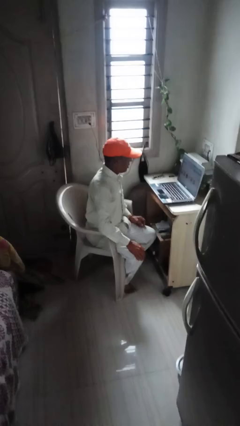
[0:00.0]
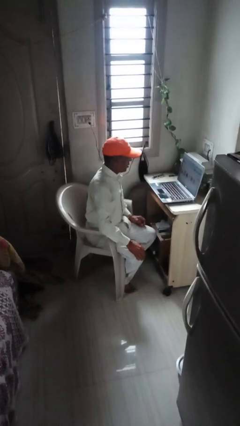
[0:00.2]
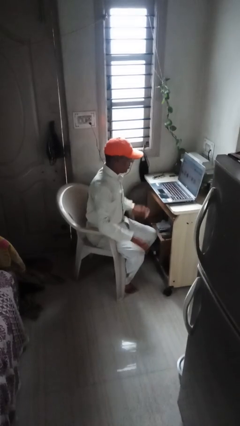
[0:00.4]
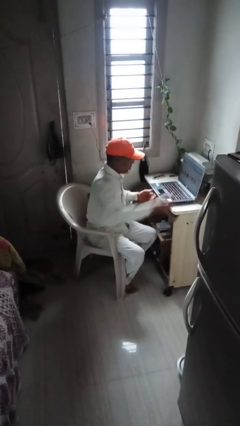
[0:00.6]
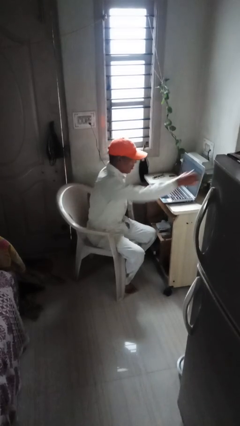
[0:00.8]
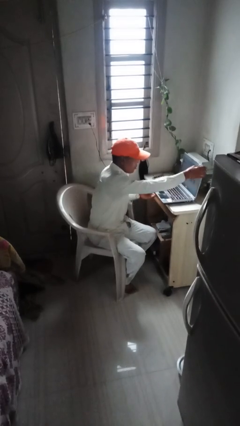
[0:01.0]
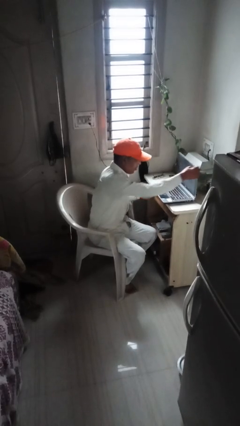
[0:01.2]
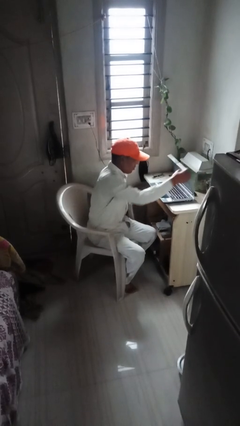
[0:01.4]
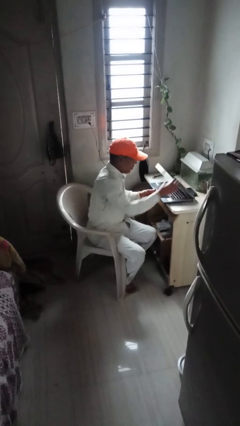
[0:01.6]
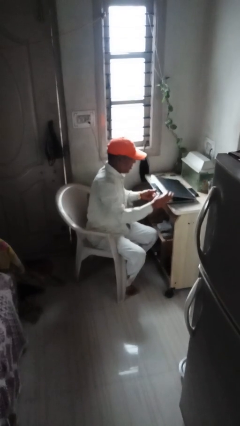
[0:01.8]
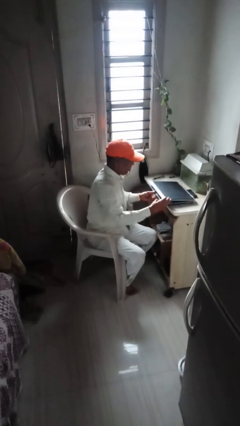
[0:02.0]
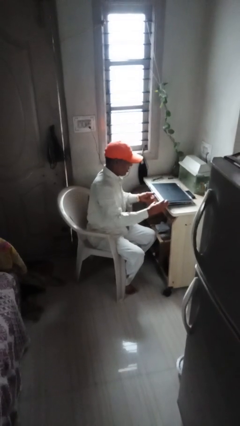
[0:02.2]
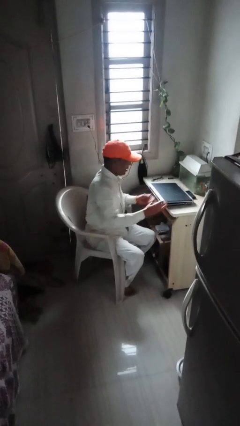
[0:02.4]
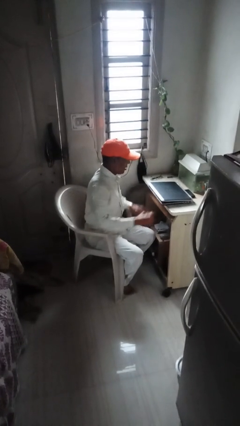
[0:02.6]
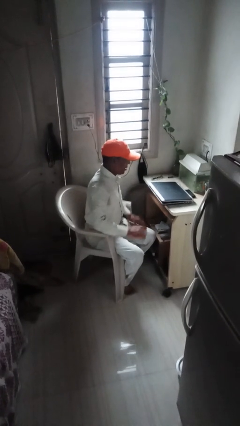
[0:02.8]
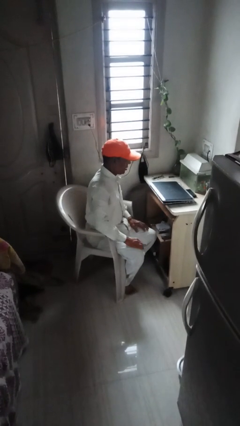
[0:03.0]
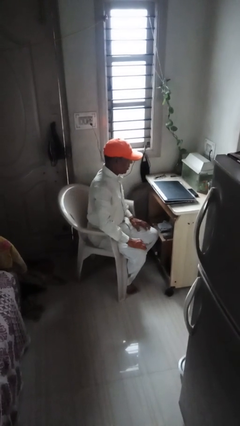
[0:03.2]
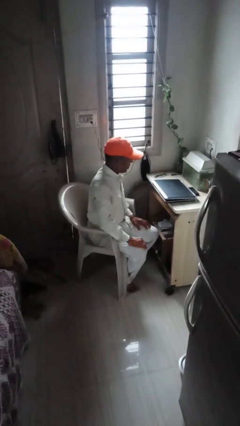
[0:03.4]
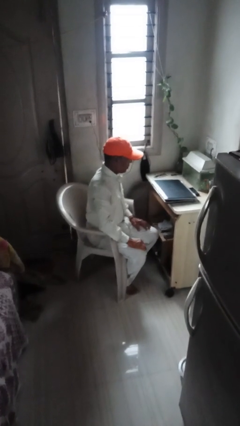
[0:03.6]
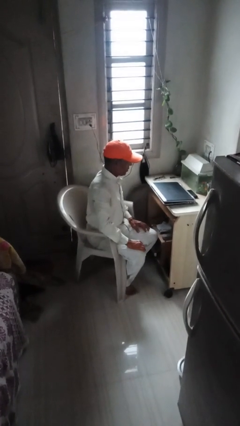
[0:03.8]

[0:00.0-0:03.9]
person closes laptop

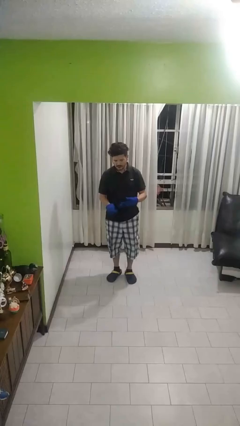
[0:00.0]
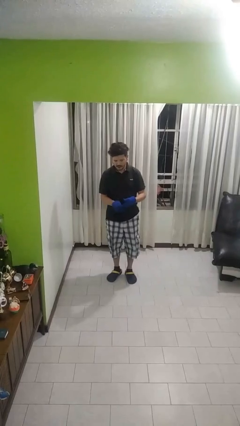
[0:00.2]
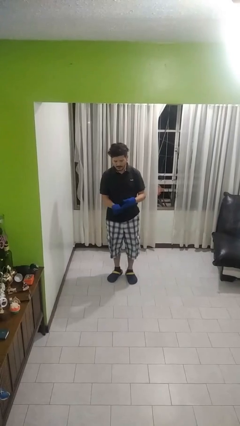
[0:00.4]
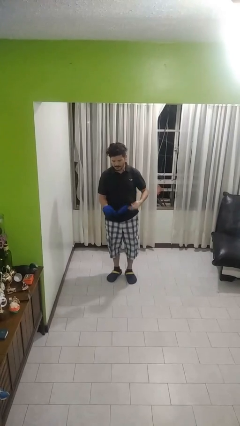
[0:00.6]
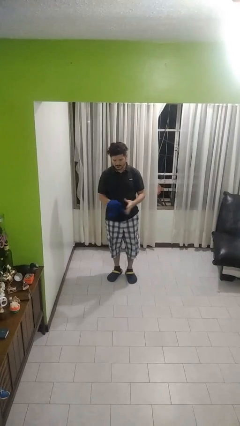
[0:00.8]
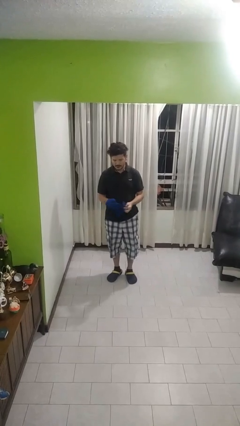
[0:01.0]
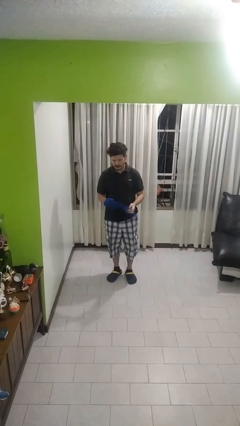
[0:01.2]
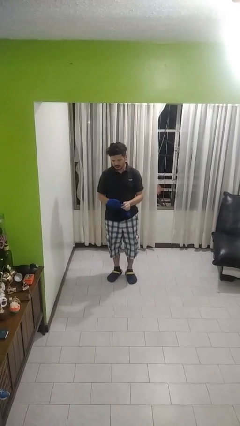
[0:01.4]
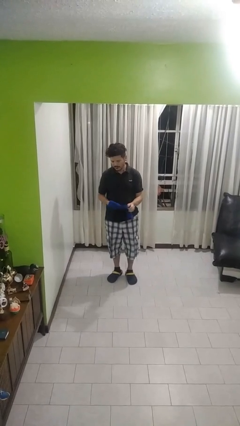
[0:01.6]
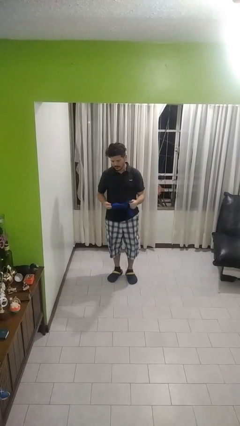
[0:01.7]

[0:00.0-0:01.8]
person takes off gloves

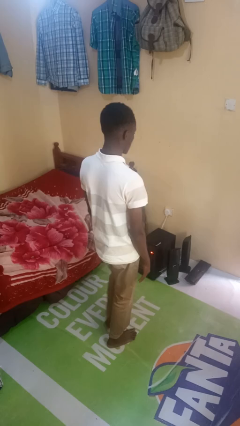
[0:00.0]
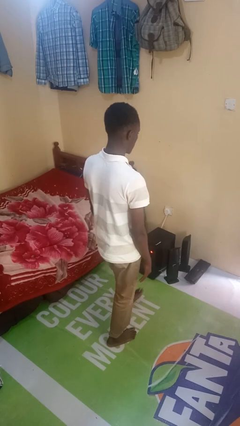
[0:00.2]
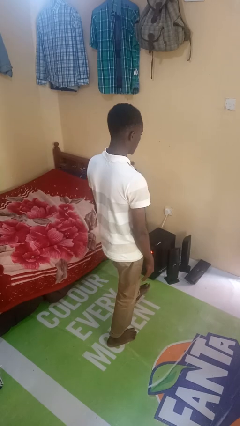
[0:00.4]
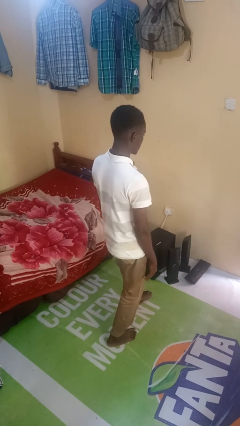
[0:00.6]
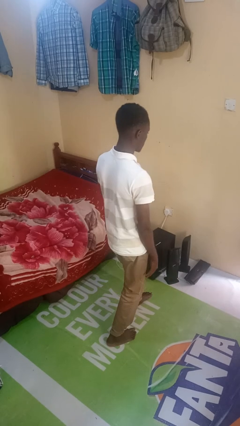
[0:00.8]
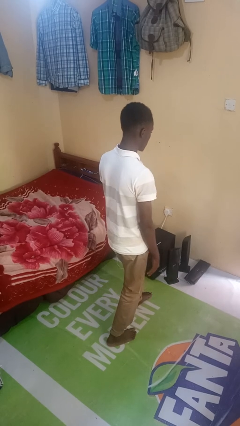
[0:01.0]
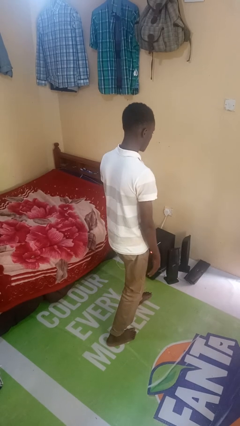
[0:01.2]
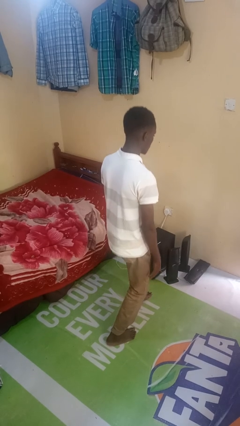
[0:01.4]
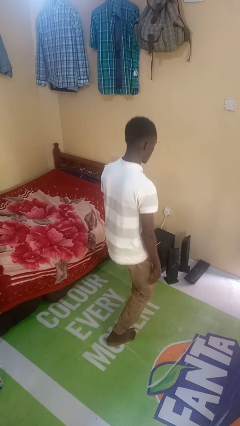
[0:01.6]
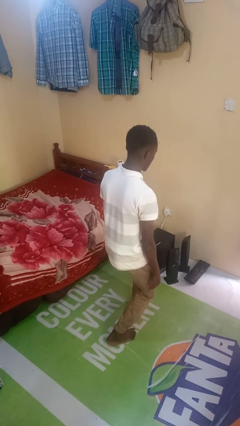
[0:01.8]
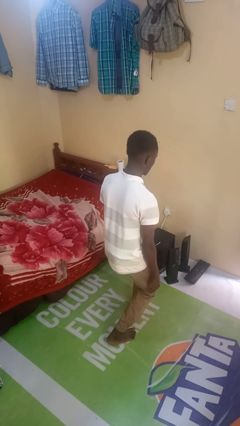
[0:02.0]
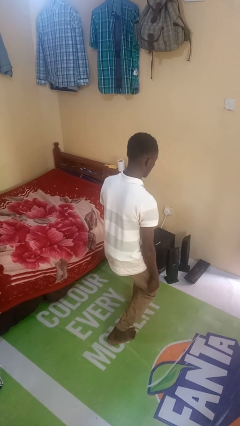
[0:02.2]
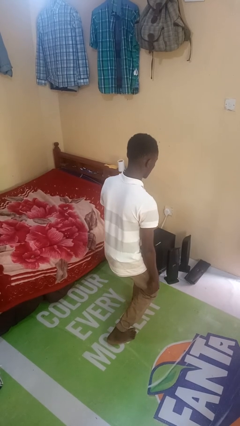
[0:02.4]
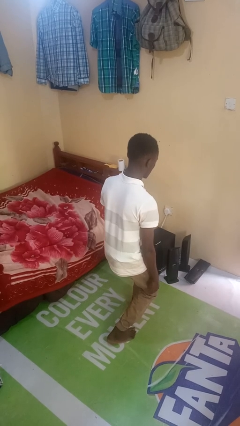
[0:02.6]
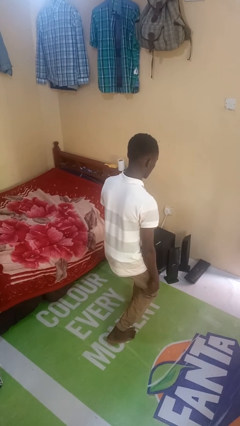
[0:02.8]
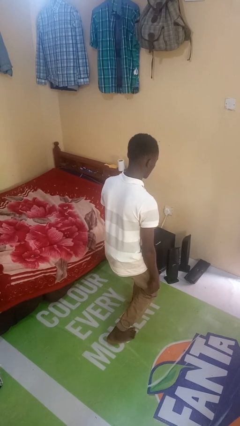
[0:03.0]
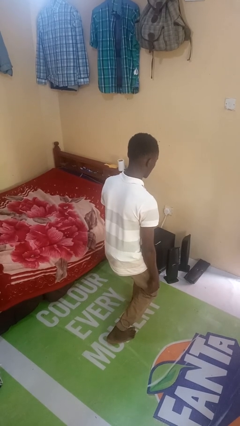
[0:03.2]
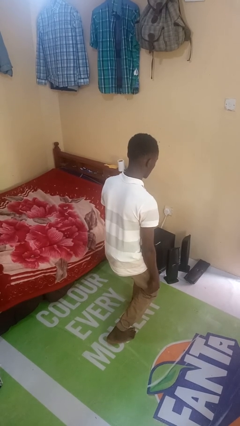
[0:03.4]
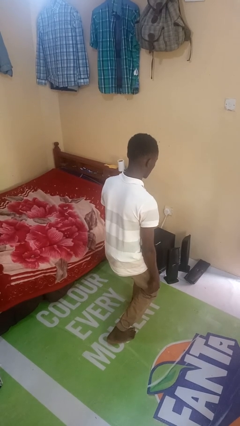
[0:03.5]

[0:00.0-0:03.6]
person exercises with lunges

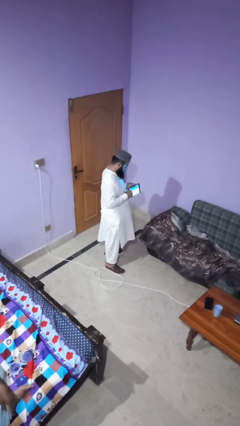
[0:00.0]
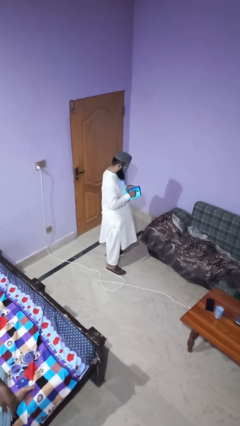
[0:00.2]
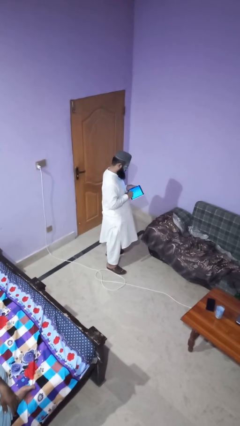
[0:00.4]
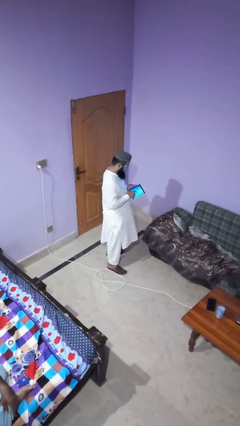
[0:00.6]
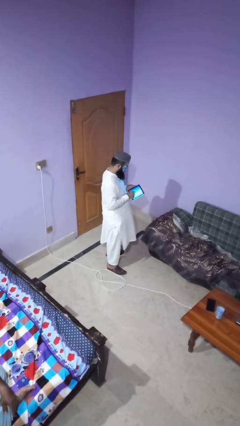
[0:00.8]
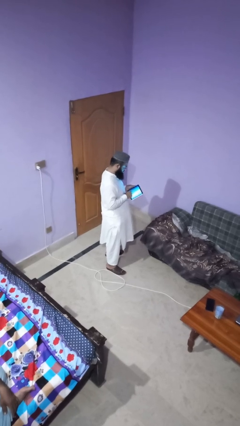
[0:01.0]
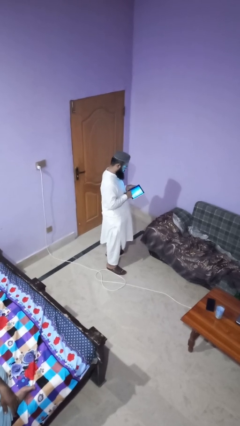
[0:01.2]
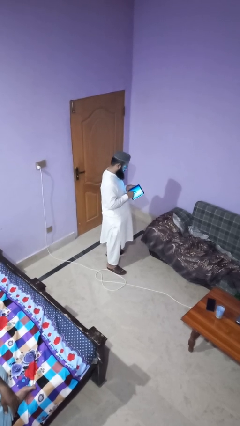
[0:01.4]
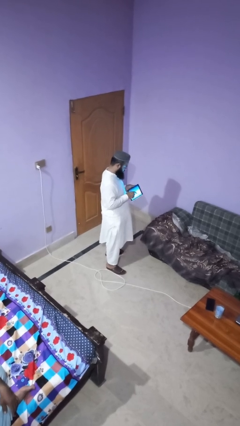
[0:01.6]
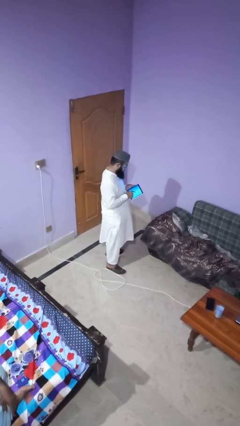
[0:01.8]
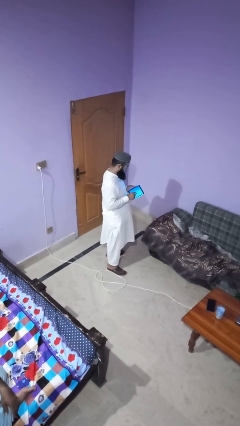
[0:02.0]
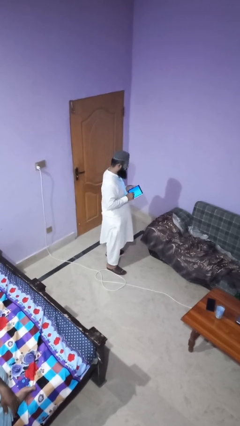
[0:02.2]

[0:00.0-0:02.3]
person interacts with tablet

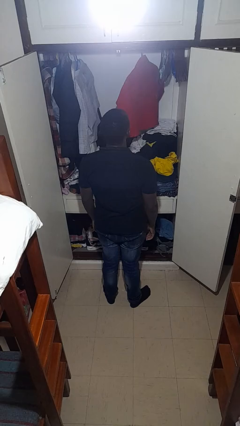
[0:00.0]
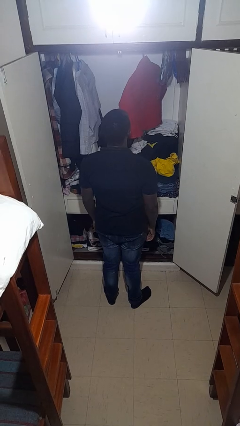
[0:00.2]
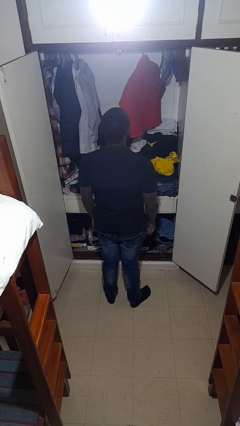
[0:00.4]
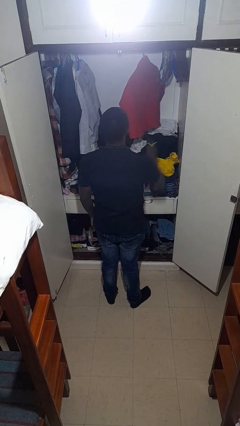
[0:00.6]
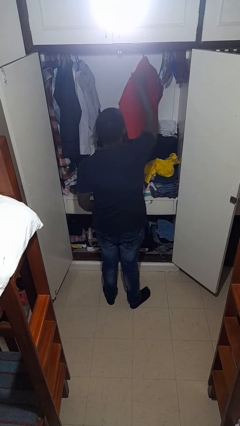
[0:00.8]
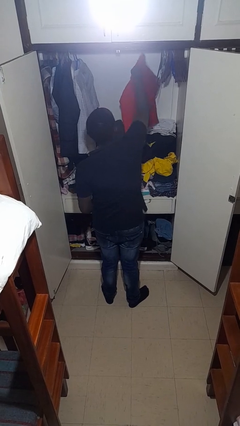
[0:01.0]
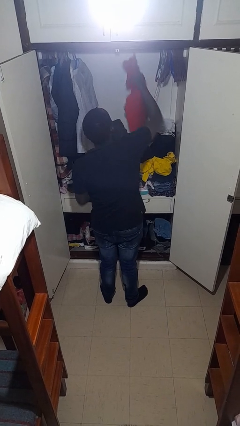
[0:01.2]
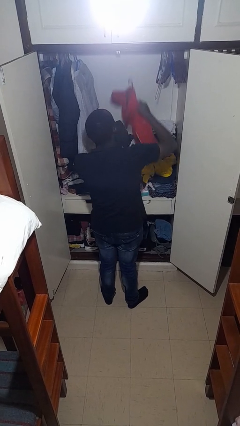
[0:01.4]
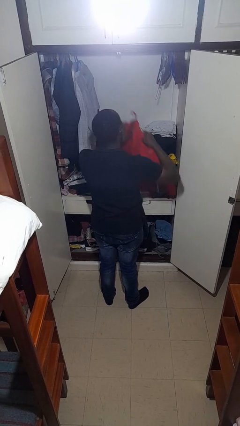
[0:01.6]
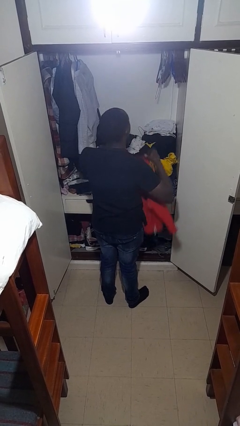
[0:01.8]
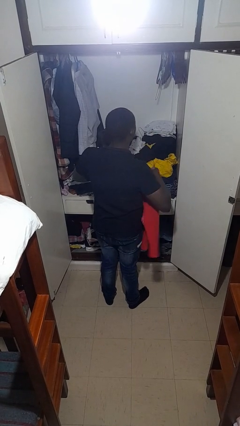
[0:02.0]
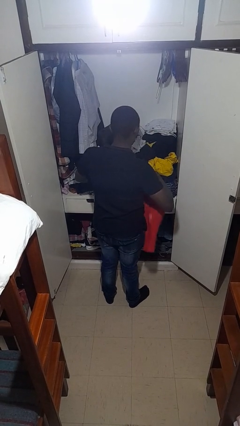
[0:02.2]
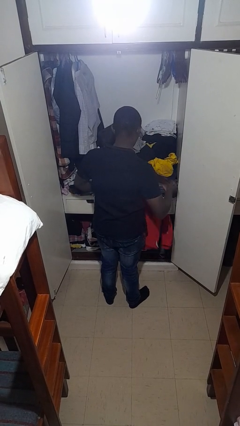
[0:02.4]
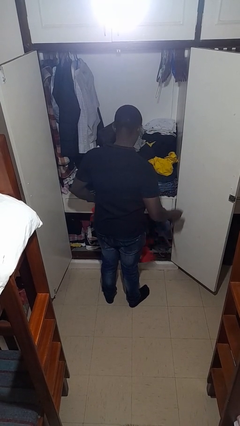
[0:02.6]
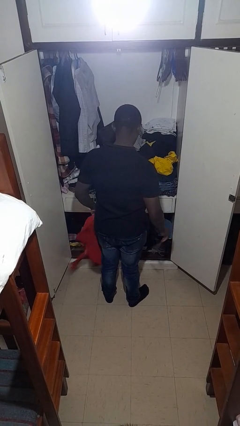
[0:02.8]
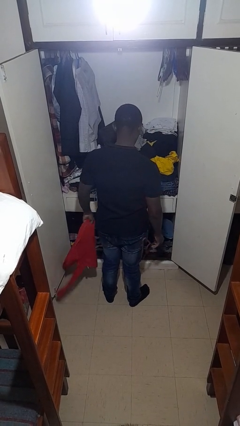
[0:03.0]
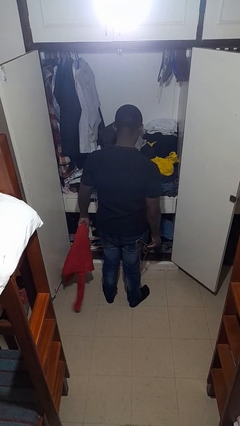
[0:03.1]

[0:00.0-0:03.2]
person takes clothes from closet

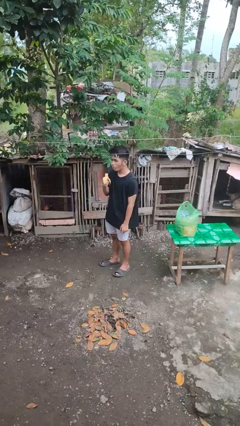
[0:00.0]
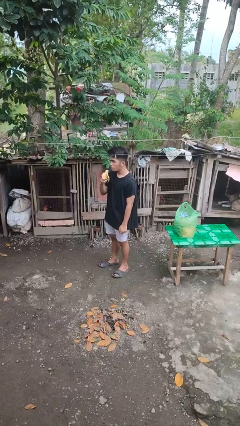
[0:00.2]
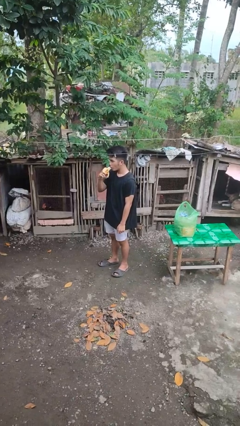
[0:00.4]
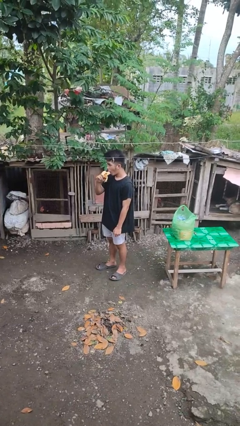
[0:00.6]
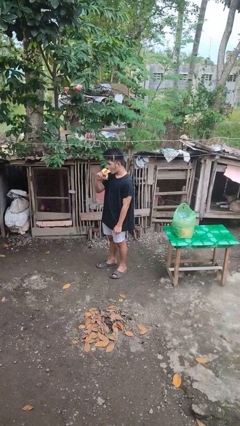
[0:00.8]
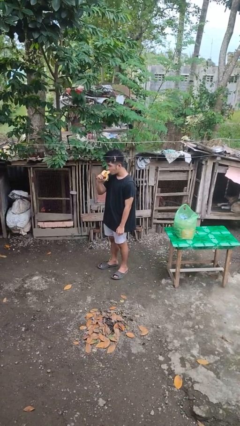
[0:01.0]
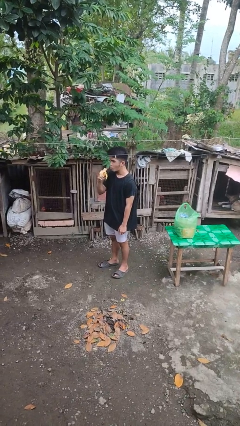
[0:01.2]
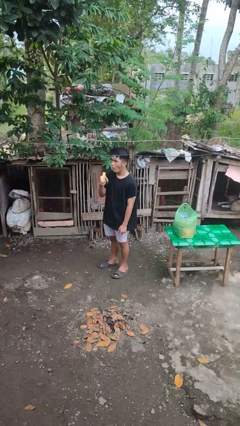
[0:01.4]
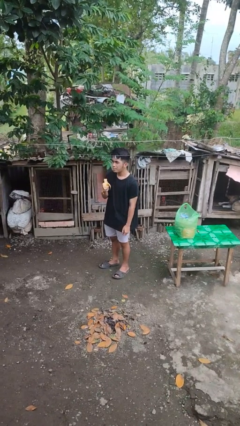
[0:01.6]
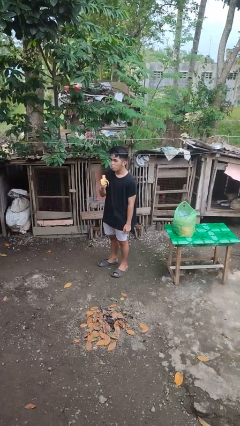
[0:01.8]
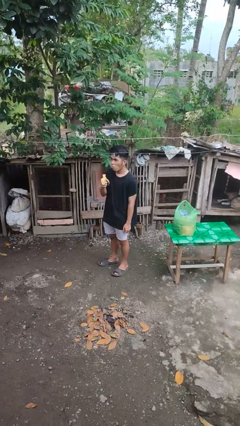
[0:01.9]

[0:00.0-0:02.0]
person eats banana

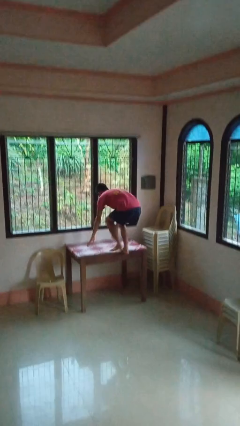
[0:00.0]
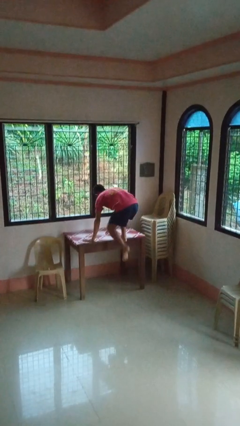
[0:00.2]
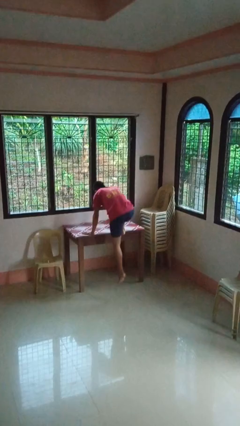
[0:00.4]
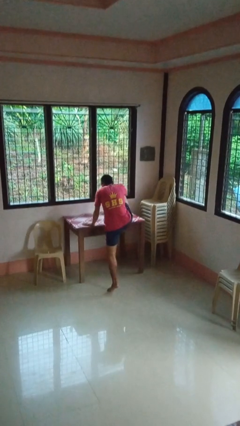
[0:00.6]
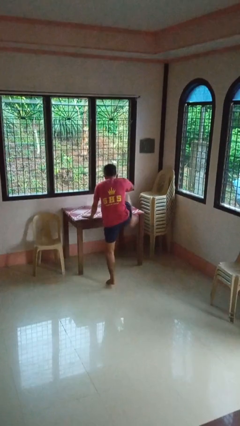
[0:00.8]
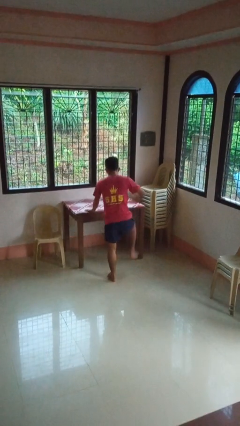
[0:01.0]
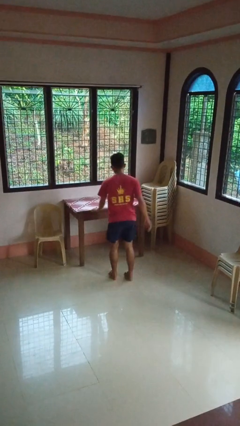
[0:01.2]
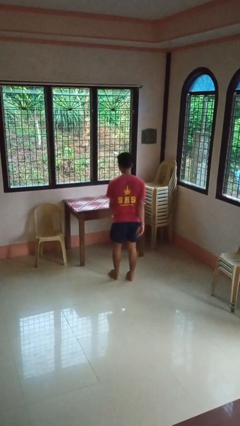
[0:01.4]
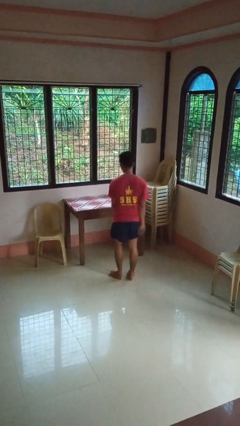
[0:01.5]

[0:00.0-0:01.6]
person climbs off table
